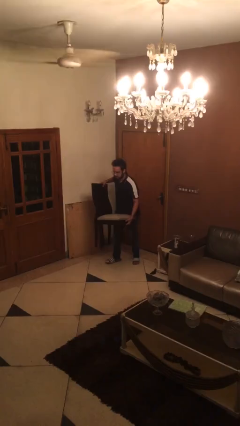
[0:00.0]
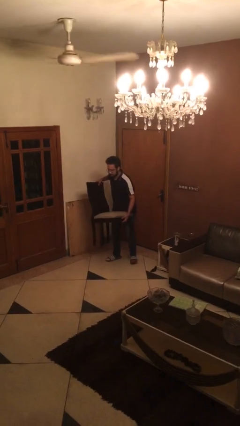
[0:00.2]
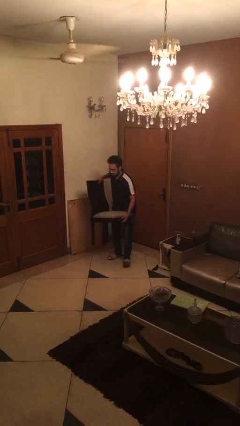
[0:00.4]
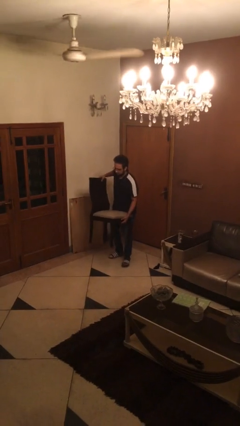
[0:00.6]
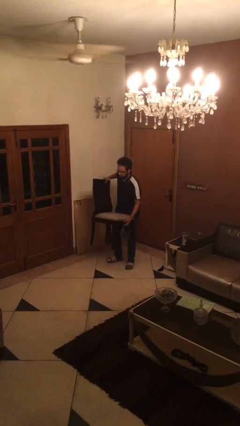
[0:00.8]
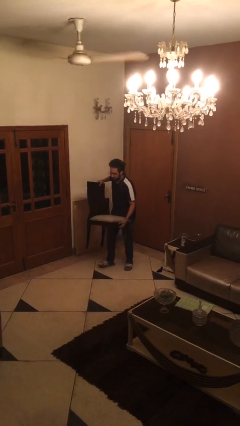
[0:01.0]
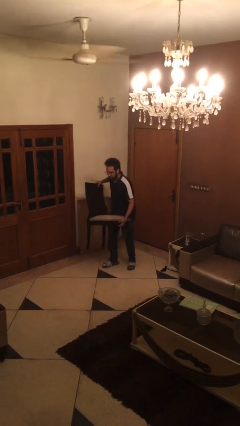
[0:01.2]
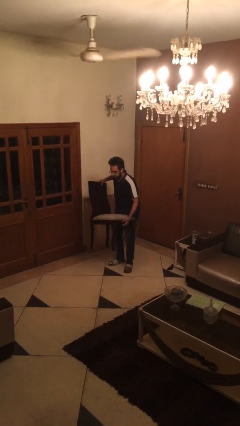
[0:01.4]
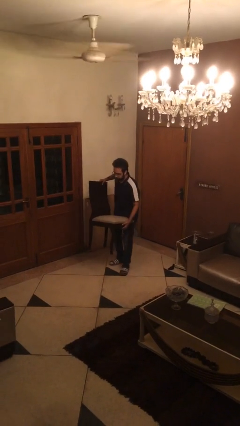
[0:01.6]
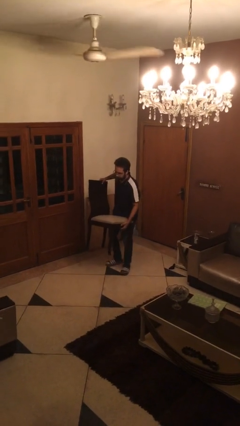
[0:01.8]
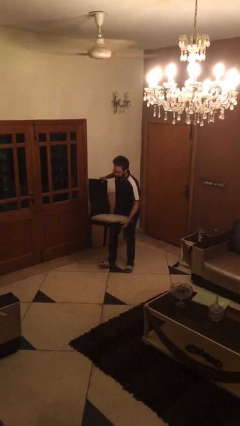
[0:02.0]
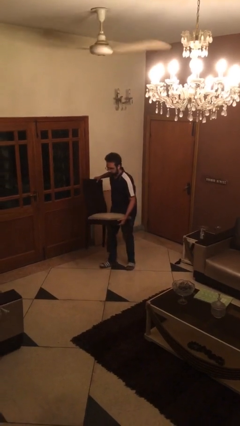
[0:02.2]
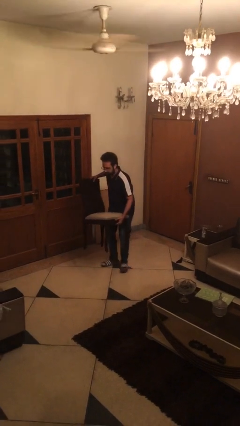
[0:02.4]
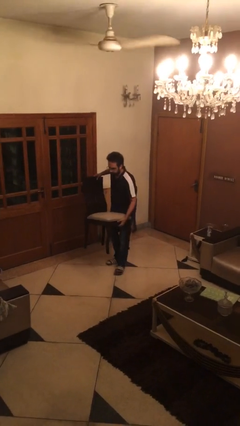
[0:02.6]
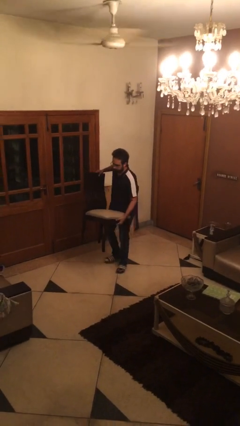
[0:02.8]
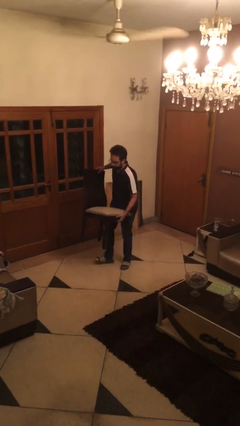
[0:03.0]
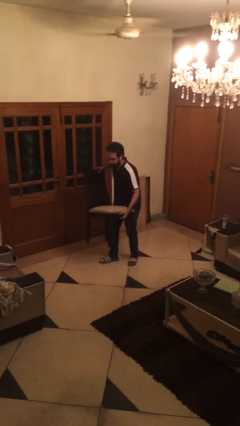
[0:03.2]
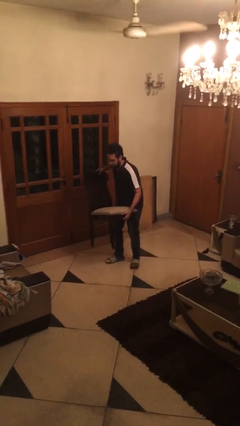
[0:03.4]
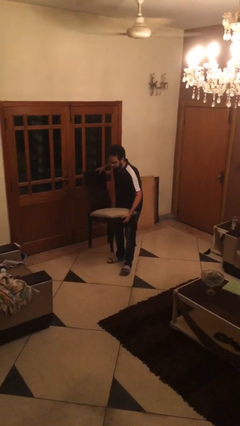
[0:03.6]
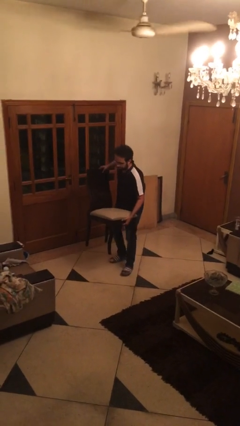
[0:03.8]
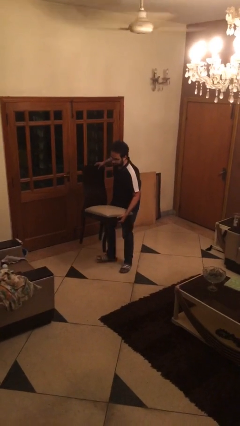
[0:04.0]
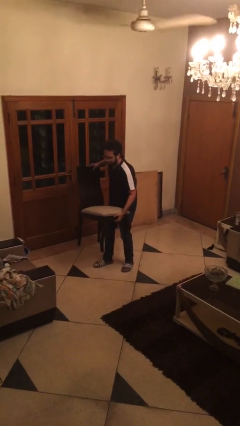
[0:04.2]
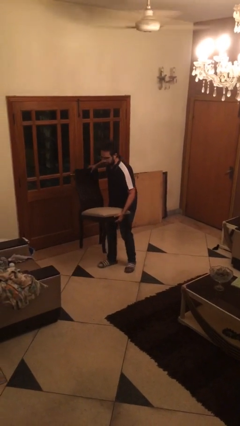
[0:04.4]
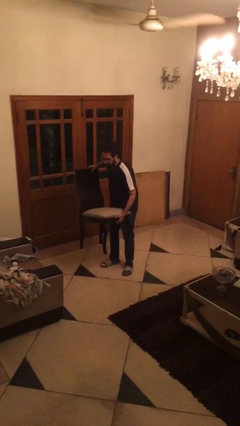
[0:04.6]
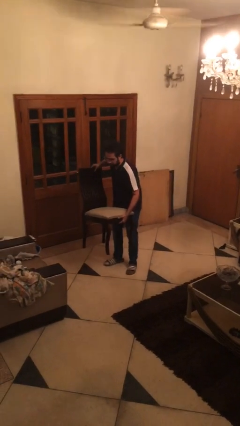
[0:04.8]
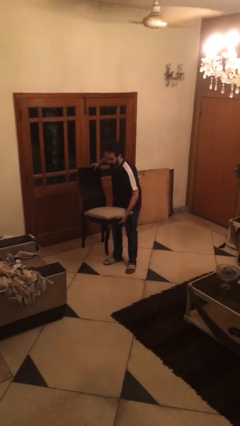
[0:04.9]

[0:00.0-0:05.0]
person carries heavy object

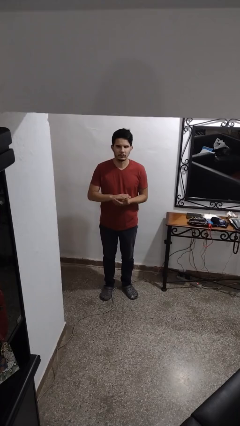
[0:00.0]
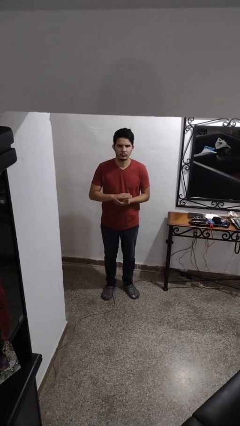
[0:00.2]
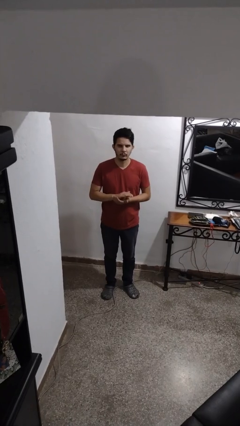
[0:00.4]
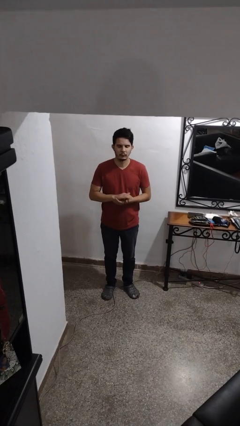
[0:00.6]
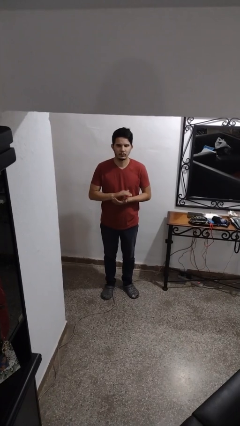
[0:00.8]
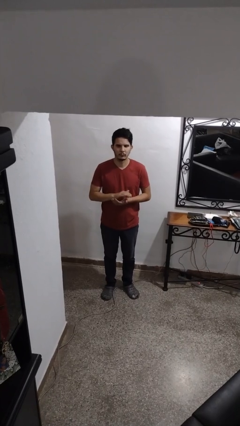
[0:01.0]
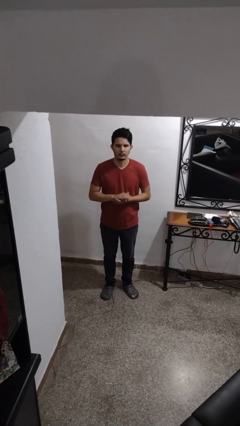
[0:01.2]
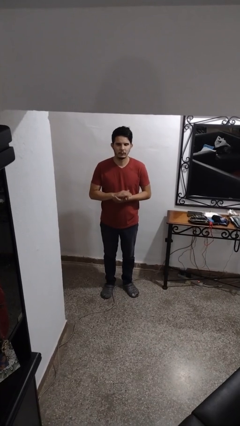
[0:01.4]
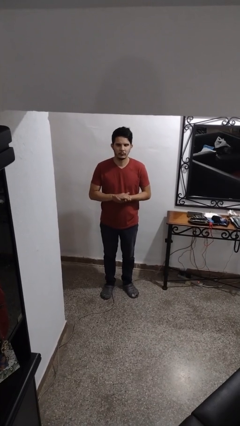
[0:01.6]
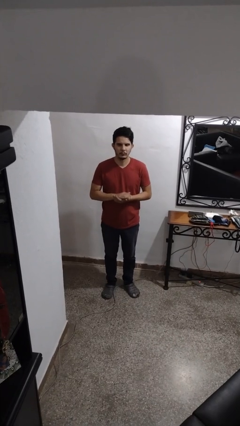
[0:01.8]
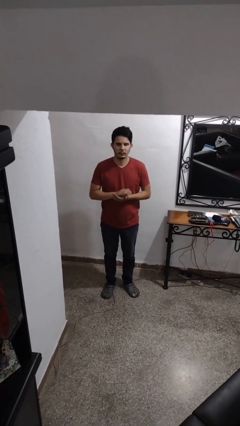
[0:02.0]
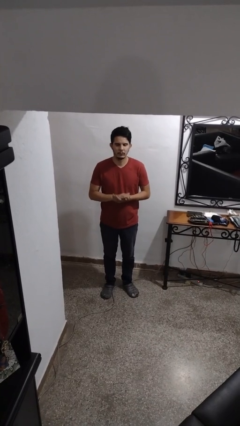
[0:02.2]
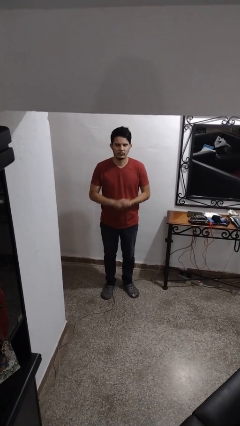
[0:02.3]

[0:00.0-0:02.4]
person claps hands

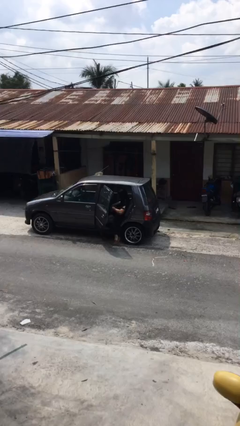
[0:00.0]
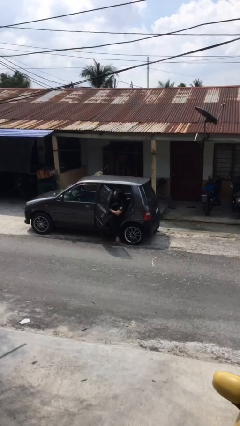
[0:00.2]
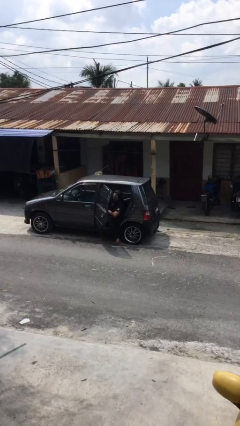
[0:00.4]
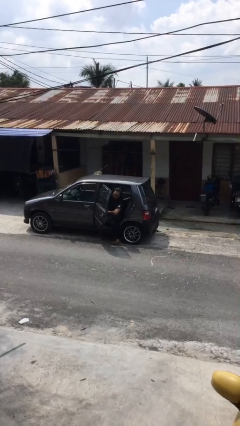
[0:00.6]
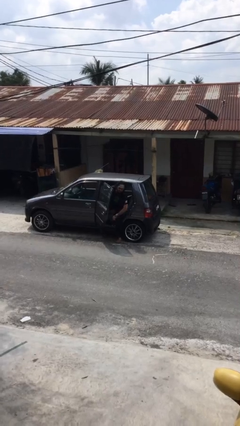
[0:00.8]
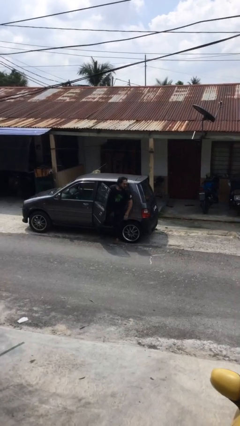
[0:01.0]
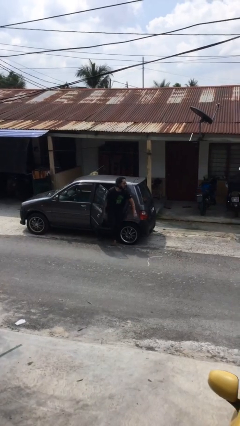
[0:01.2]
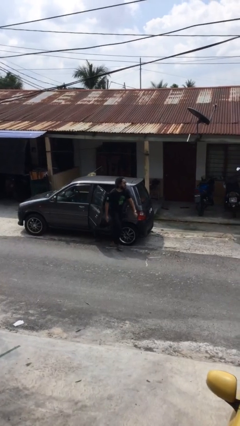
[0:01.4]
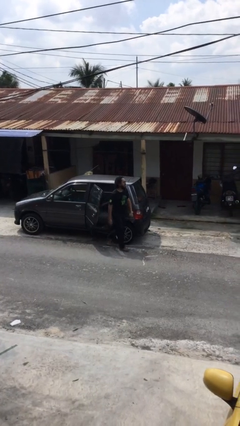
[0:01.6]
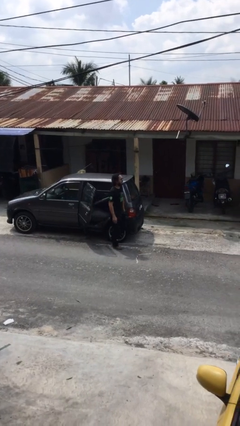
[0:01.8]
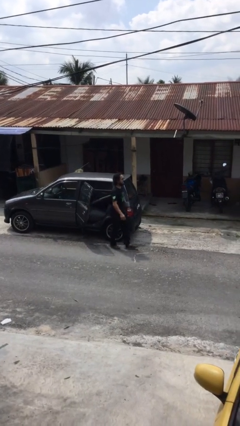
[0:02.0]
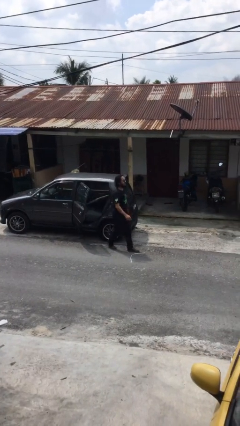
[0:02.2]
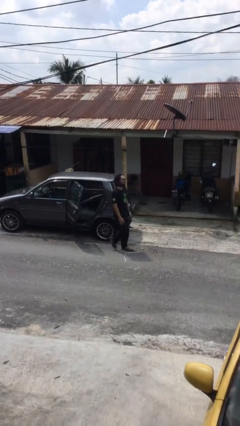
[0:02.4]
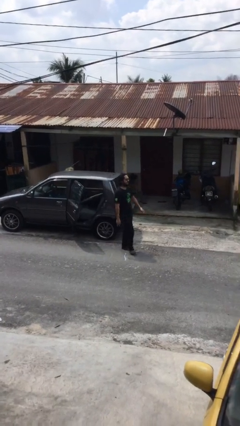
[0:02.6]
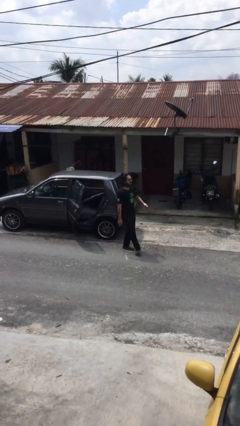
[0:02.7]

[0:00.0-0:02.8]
person exits car

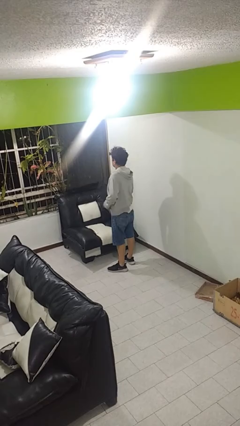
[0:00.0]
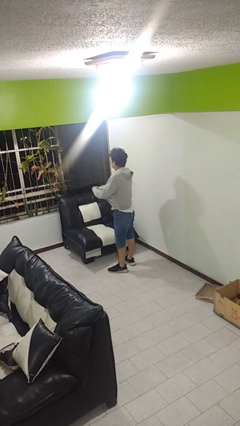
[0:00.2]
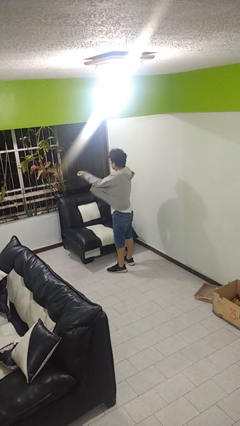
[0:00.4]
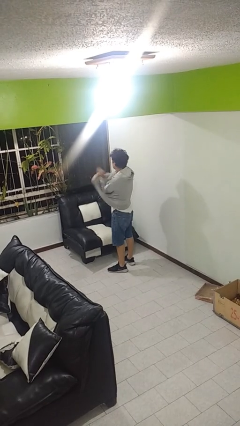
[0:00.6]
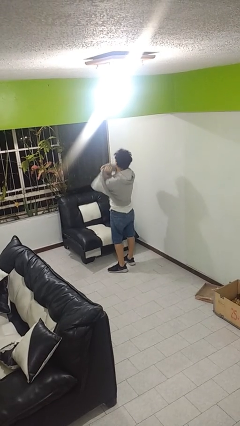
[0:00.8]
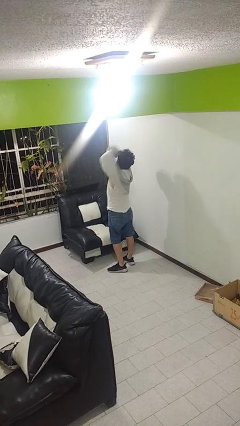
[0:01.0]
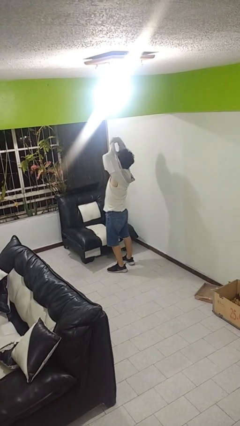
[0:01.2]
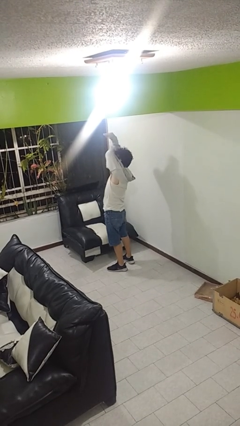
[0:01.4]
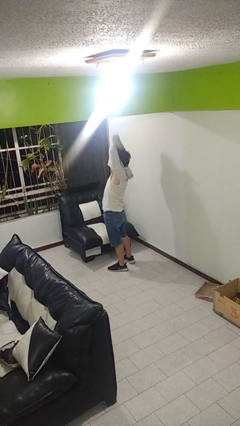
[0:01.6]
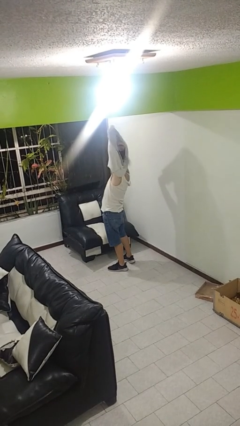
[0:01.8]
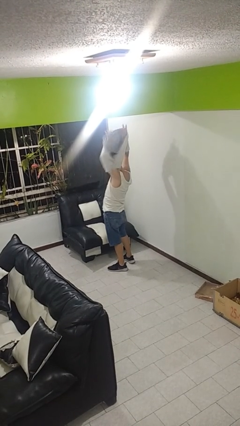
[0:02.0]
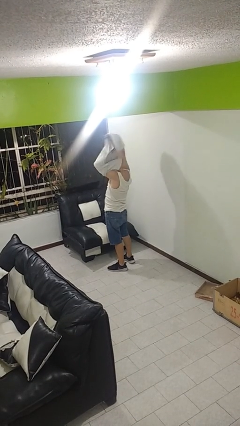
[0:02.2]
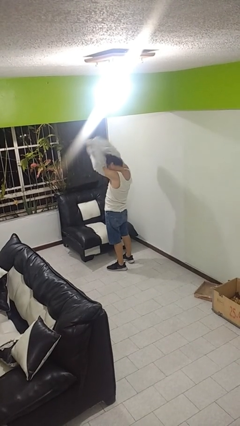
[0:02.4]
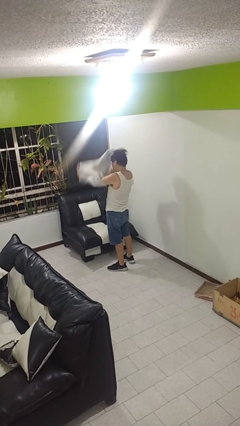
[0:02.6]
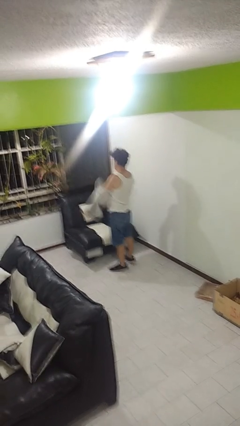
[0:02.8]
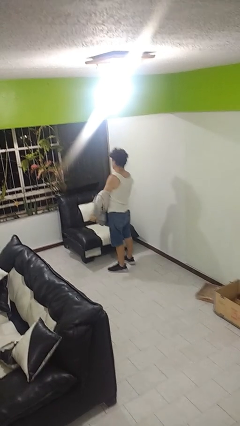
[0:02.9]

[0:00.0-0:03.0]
person takes off hoodie

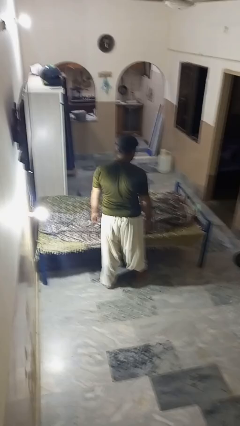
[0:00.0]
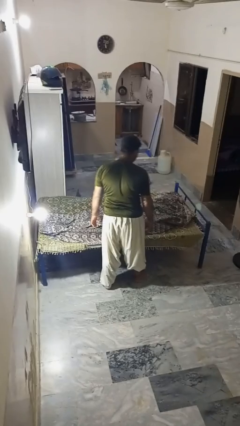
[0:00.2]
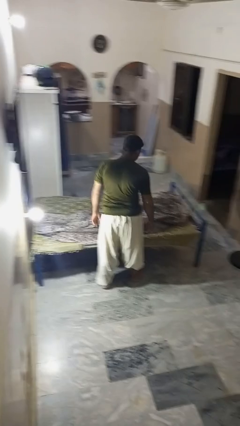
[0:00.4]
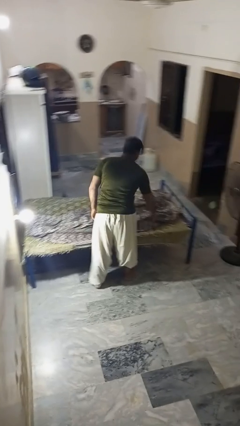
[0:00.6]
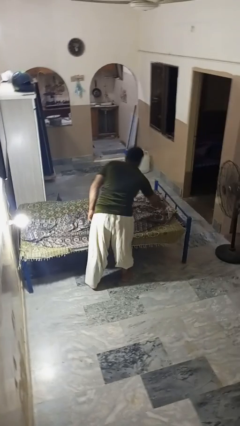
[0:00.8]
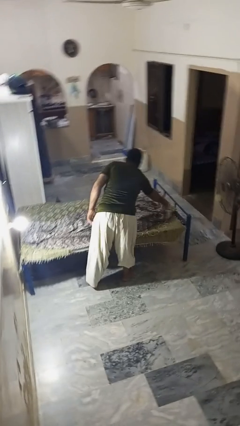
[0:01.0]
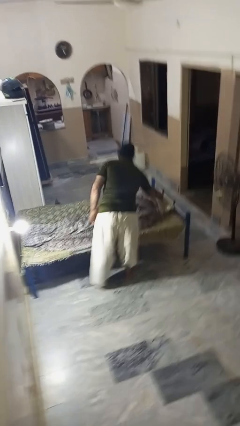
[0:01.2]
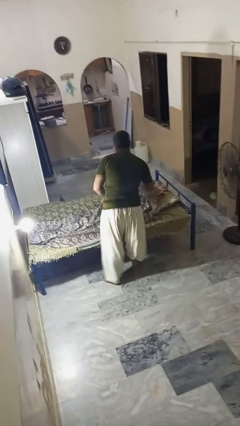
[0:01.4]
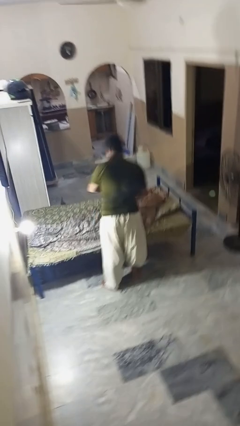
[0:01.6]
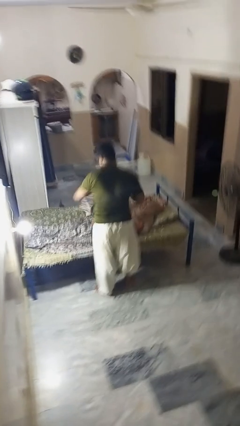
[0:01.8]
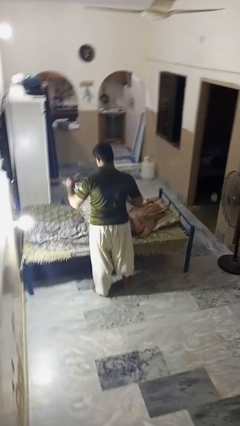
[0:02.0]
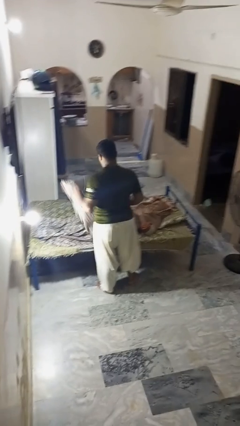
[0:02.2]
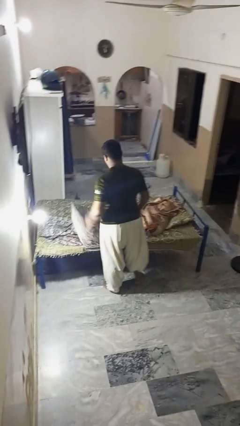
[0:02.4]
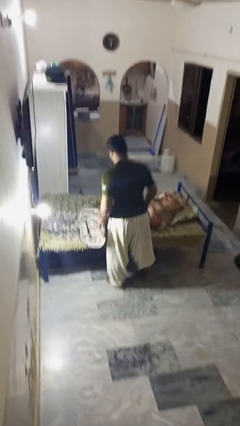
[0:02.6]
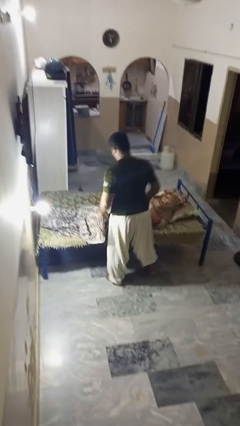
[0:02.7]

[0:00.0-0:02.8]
person uncovers friend with blanket

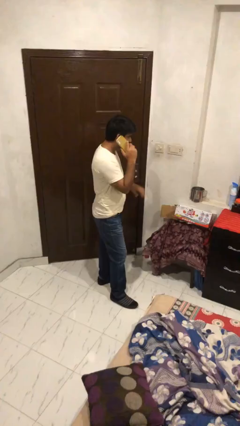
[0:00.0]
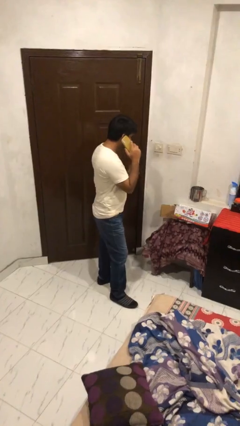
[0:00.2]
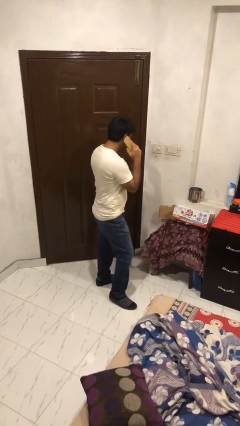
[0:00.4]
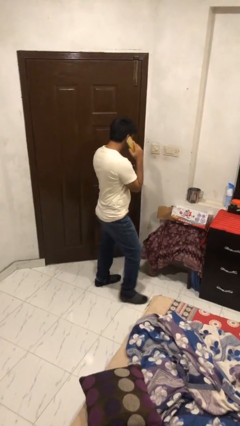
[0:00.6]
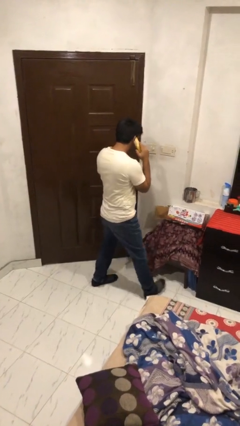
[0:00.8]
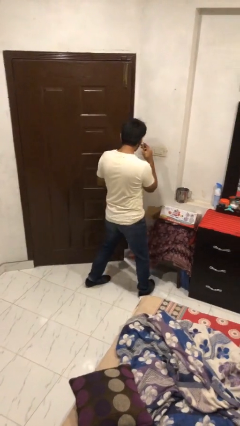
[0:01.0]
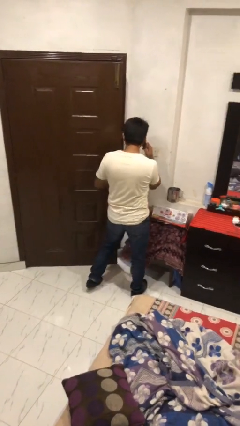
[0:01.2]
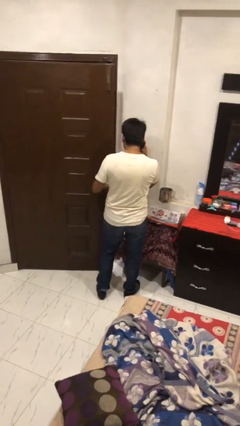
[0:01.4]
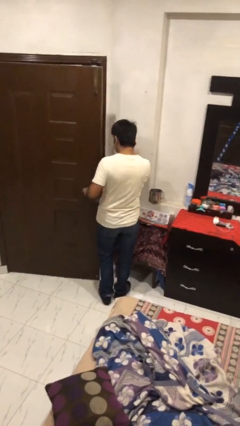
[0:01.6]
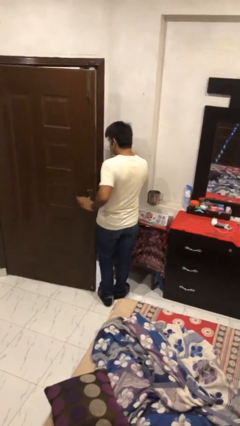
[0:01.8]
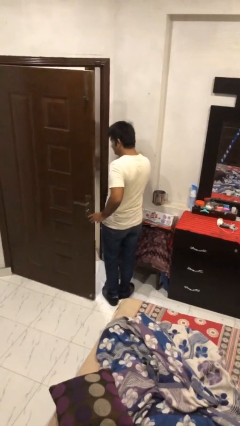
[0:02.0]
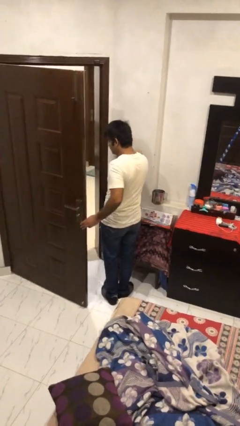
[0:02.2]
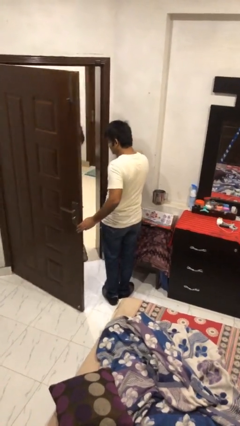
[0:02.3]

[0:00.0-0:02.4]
person opens facility door
